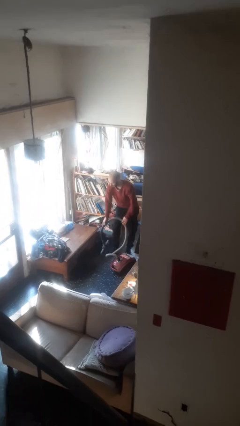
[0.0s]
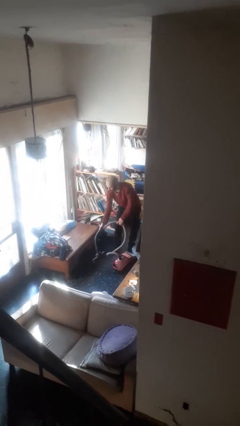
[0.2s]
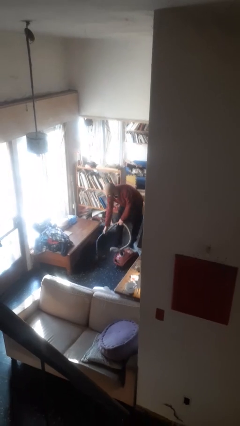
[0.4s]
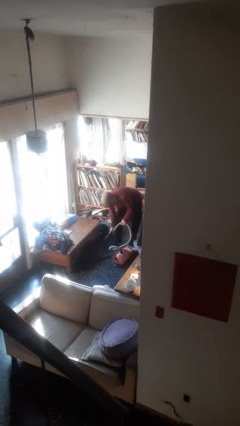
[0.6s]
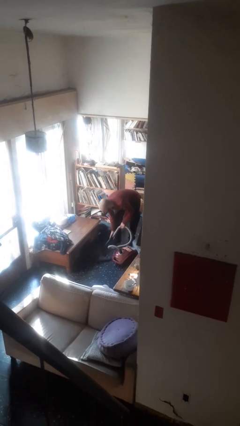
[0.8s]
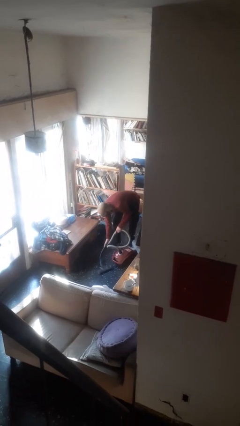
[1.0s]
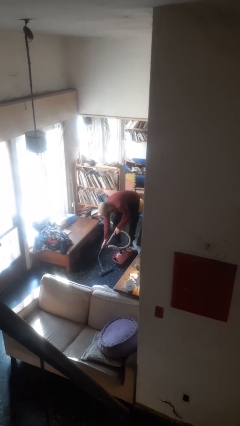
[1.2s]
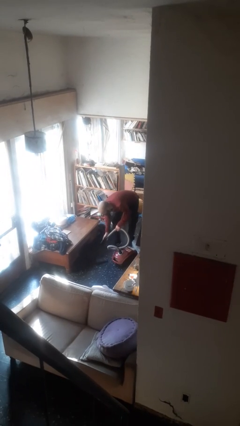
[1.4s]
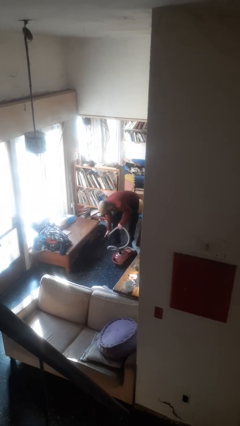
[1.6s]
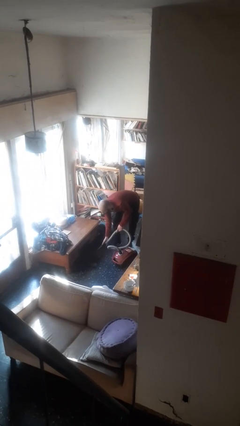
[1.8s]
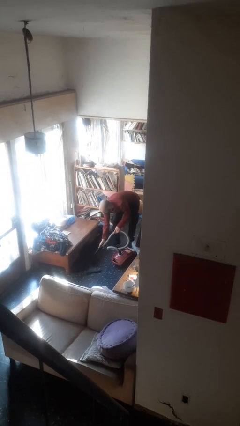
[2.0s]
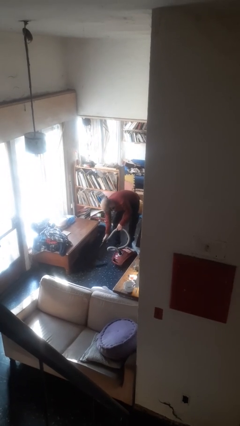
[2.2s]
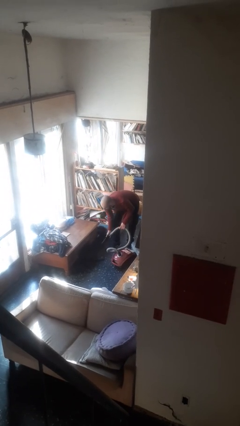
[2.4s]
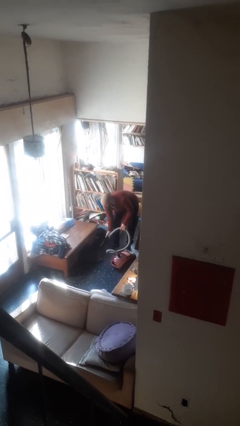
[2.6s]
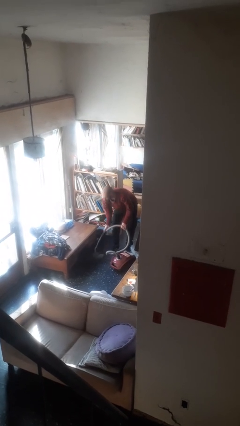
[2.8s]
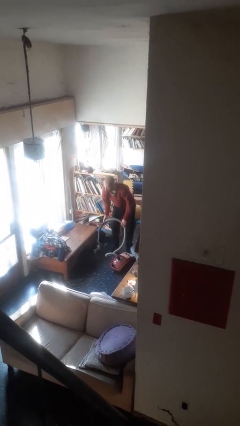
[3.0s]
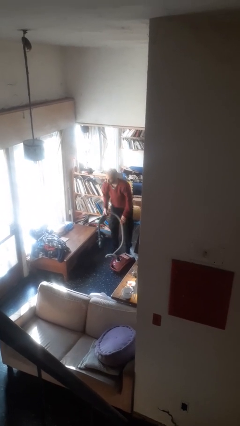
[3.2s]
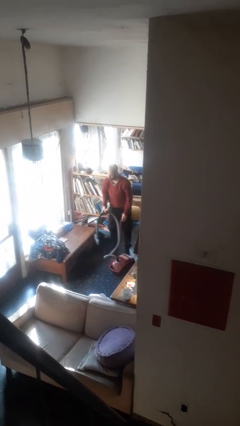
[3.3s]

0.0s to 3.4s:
person vacuums carpet

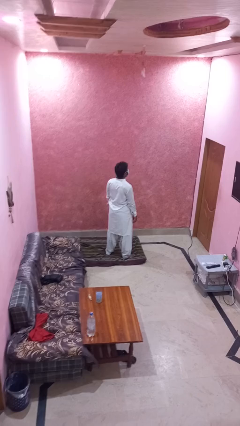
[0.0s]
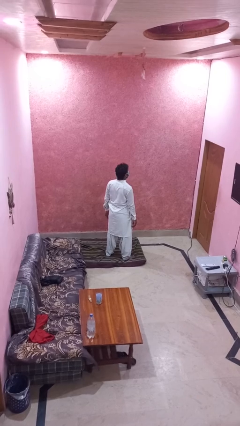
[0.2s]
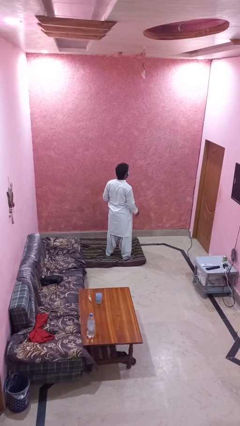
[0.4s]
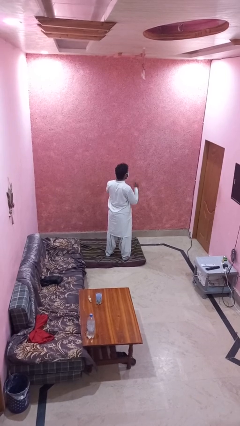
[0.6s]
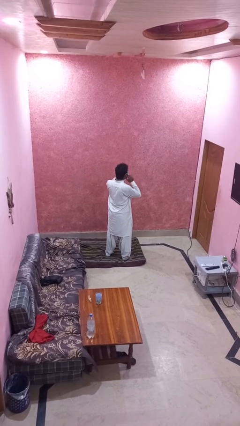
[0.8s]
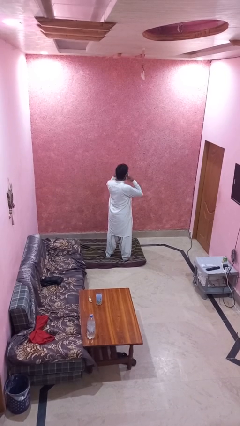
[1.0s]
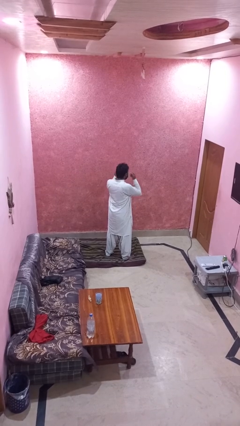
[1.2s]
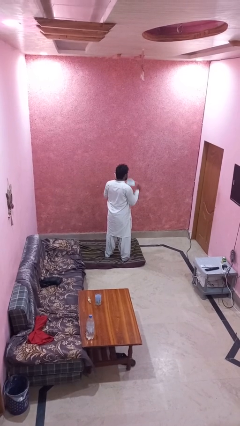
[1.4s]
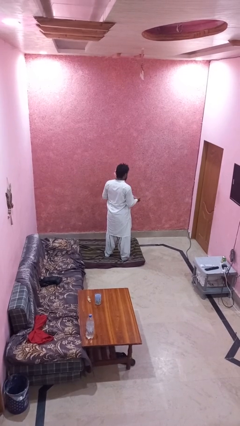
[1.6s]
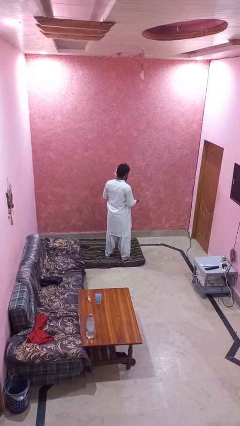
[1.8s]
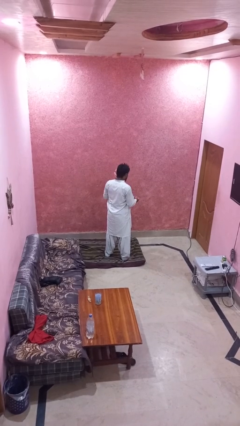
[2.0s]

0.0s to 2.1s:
person takes off facemask

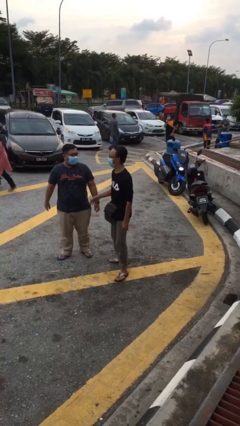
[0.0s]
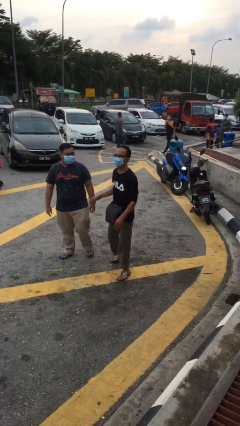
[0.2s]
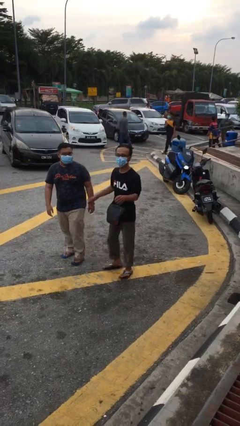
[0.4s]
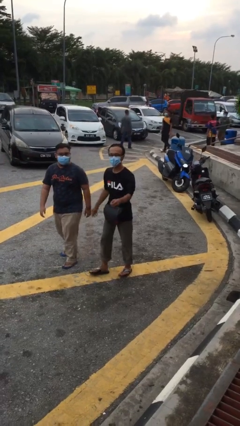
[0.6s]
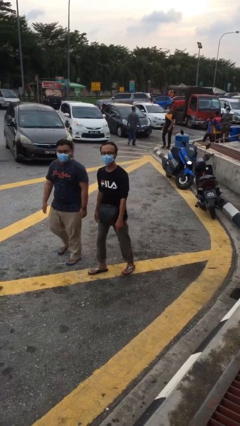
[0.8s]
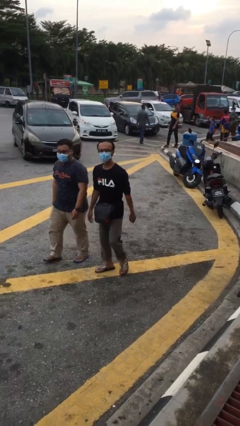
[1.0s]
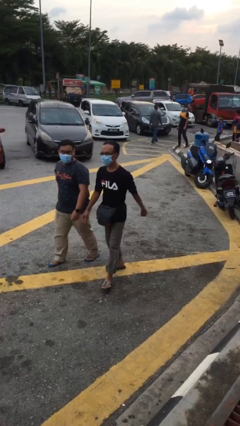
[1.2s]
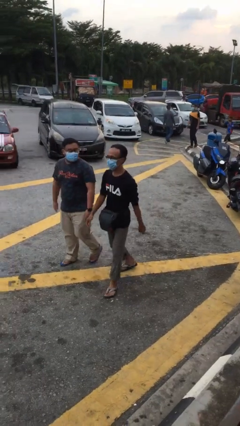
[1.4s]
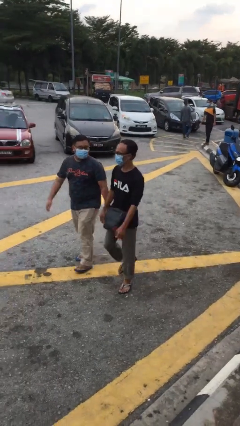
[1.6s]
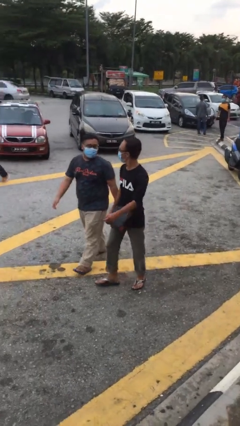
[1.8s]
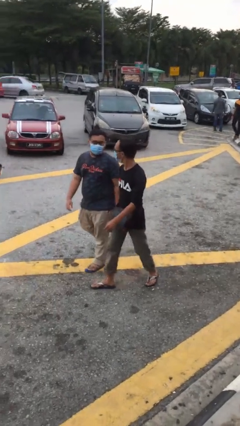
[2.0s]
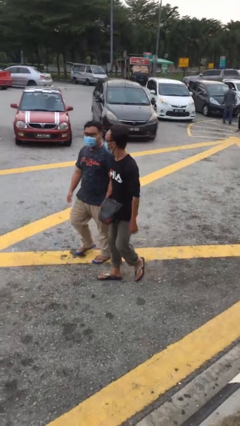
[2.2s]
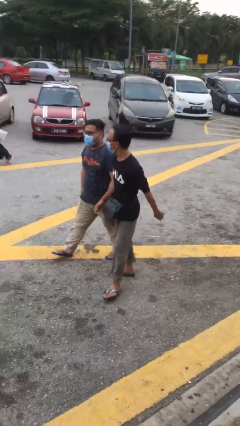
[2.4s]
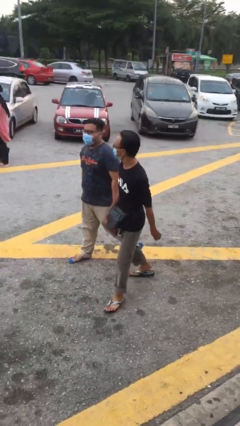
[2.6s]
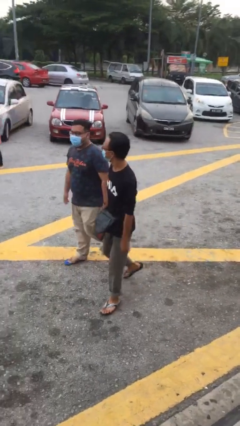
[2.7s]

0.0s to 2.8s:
person talks to person

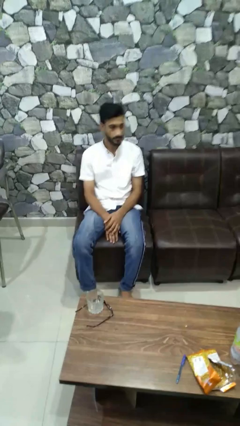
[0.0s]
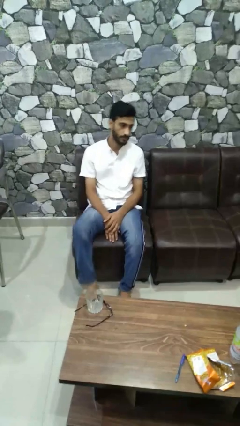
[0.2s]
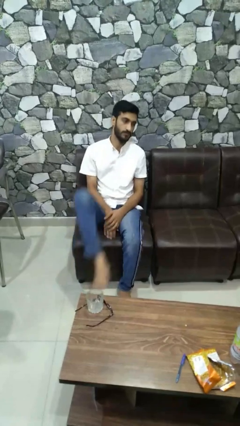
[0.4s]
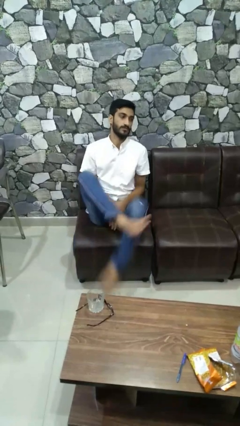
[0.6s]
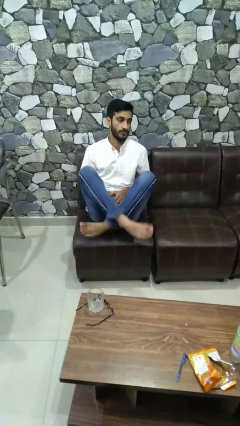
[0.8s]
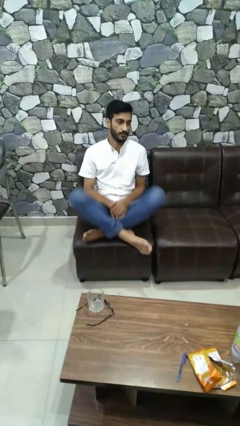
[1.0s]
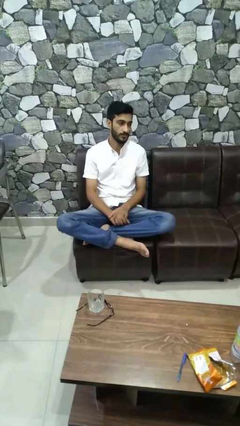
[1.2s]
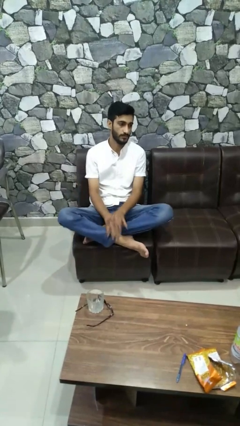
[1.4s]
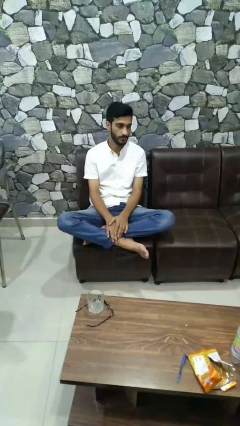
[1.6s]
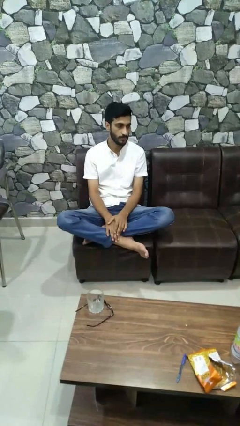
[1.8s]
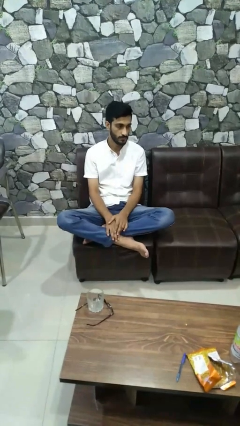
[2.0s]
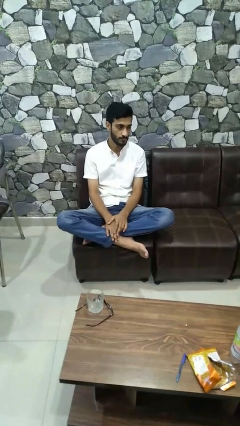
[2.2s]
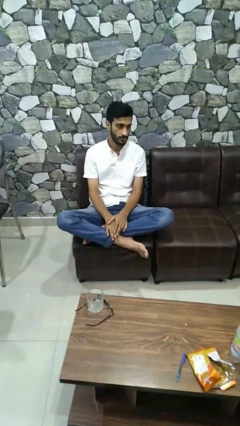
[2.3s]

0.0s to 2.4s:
person crosses legs

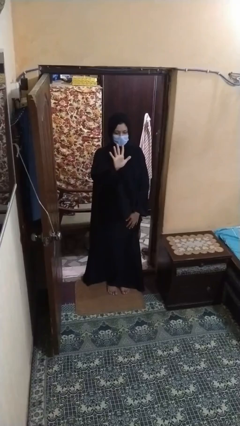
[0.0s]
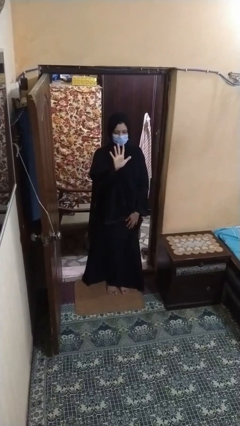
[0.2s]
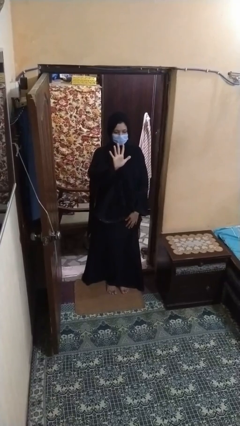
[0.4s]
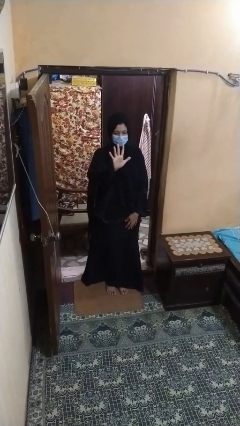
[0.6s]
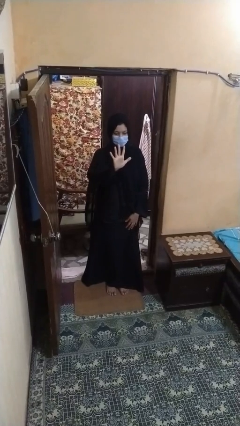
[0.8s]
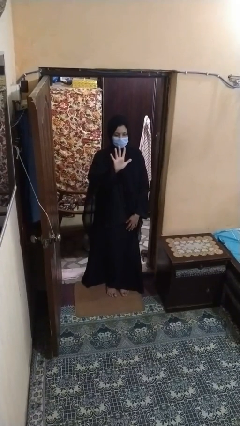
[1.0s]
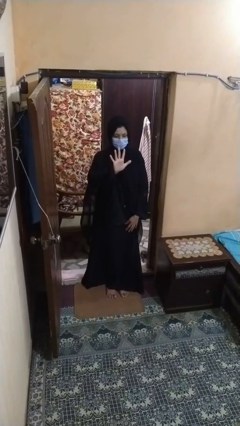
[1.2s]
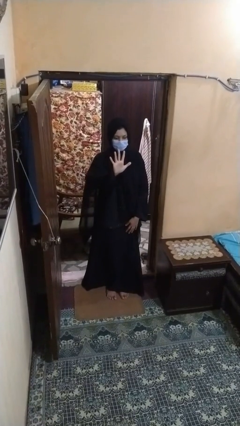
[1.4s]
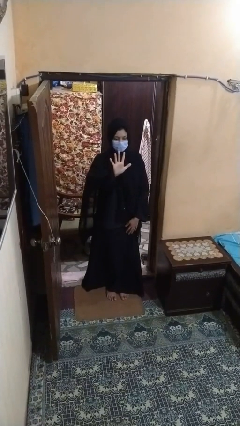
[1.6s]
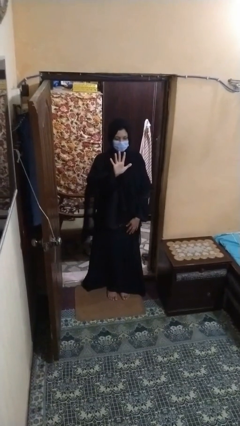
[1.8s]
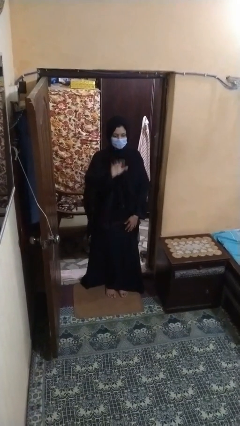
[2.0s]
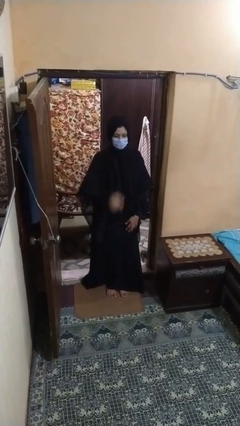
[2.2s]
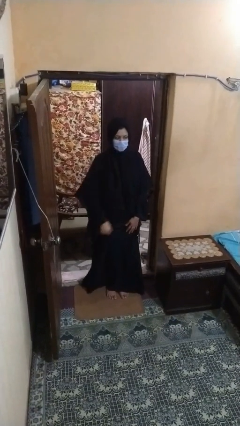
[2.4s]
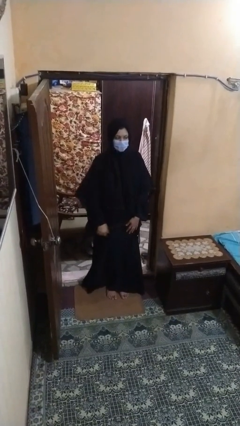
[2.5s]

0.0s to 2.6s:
person gestures number five

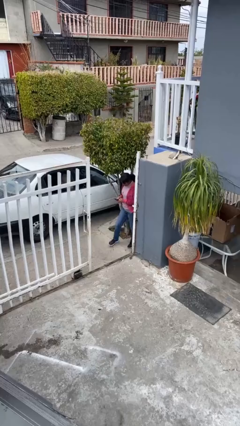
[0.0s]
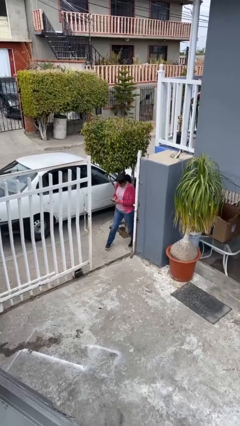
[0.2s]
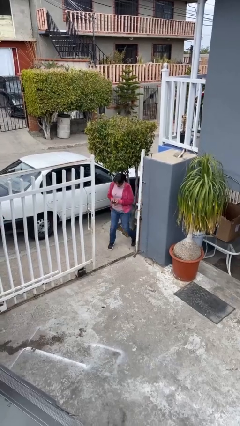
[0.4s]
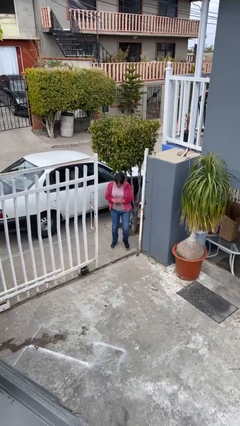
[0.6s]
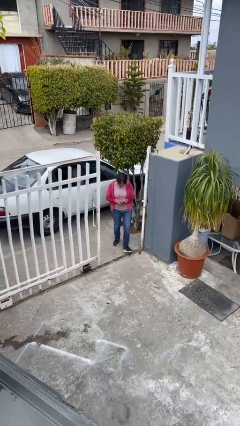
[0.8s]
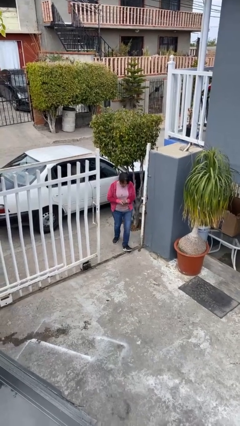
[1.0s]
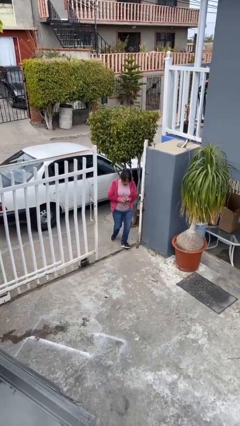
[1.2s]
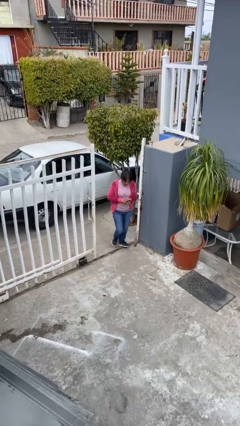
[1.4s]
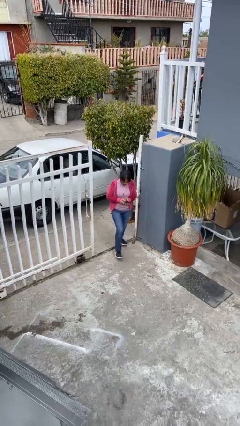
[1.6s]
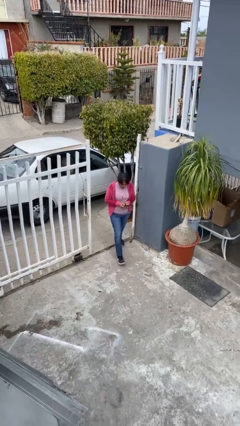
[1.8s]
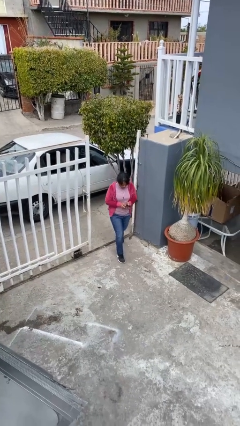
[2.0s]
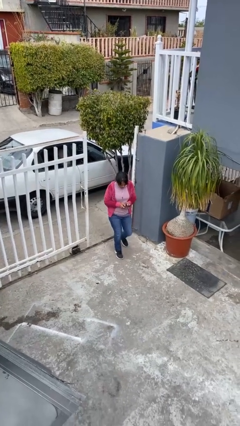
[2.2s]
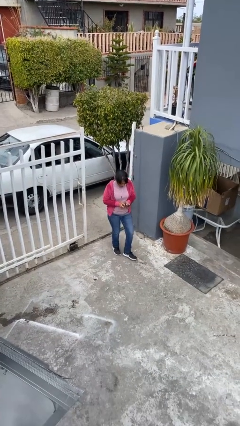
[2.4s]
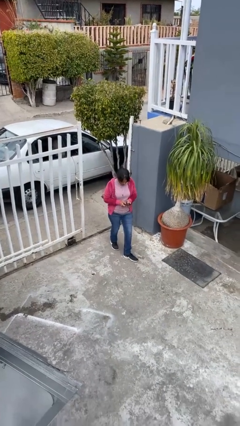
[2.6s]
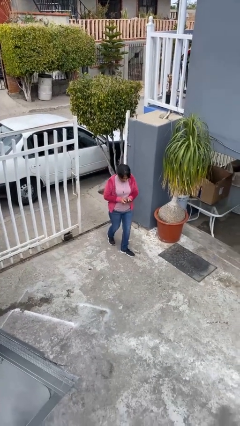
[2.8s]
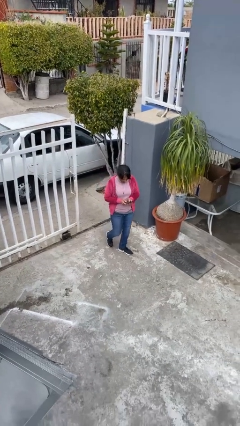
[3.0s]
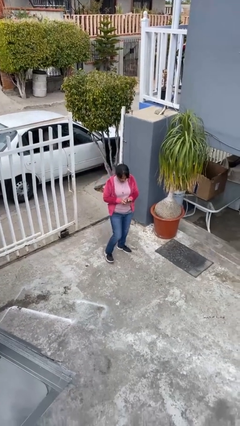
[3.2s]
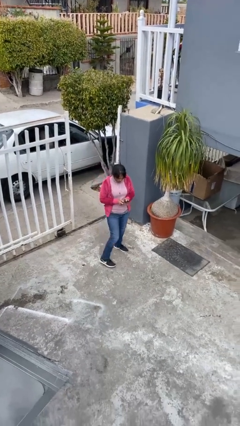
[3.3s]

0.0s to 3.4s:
person enters scene through structure

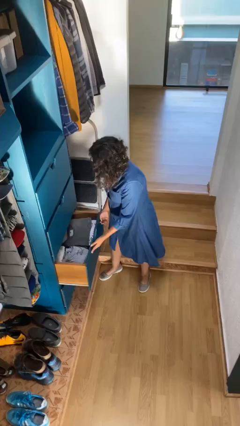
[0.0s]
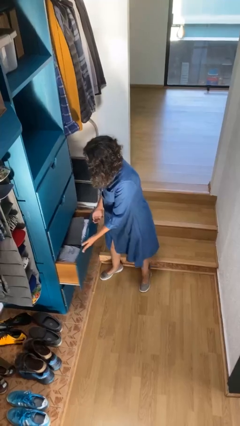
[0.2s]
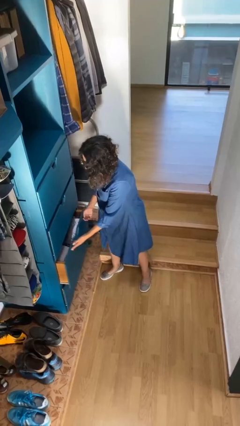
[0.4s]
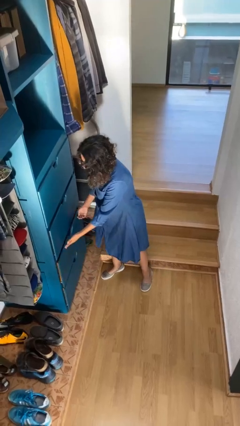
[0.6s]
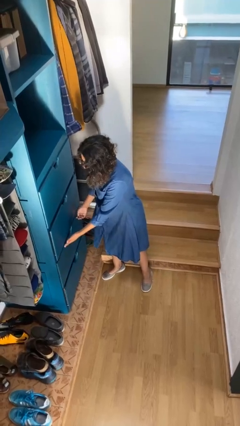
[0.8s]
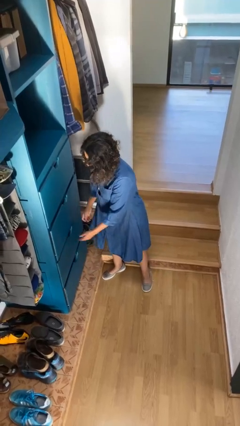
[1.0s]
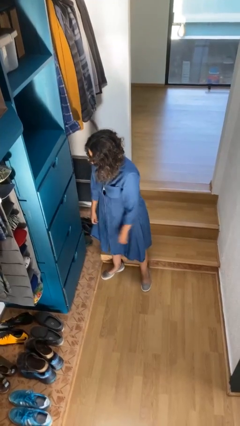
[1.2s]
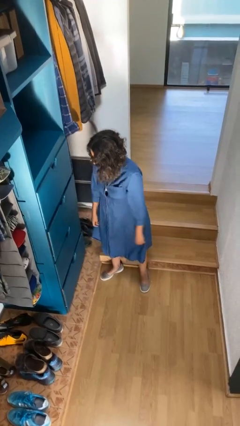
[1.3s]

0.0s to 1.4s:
person closes dresser drawer
